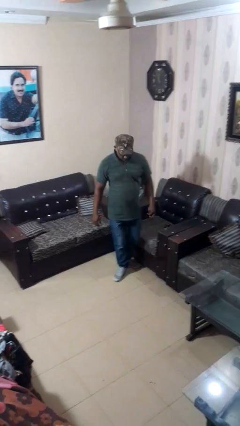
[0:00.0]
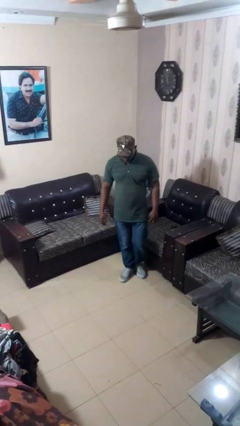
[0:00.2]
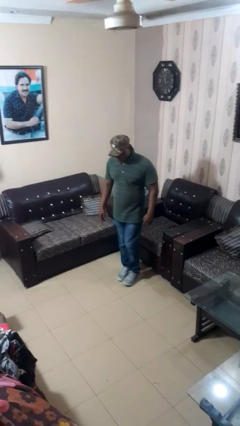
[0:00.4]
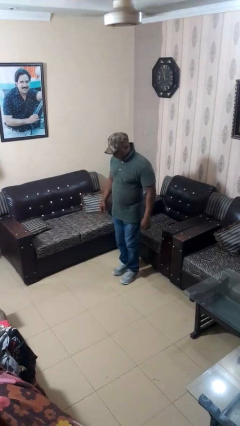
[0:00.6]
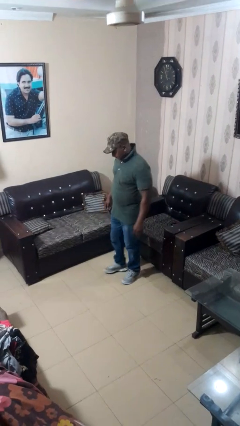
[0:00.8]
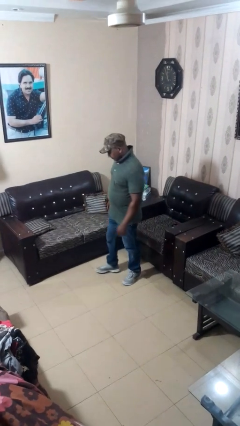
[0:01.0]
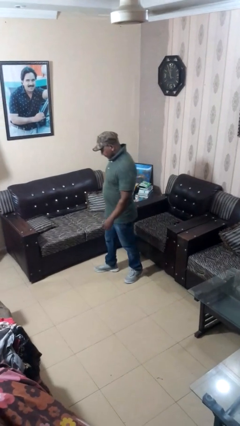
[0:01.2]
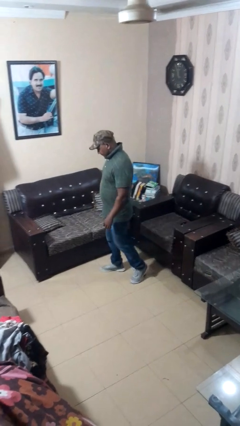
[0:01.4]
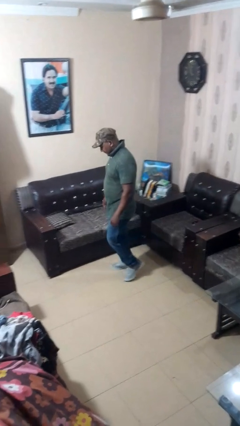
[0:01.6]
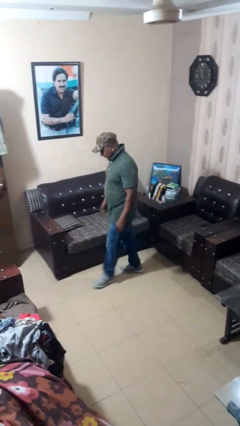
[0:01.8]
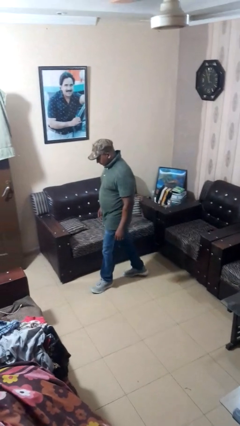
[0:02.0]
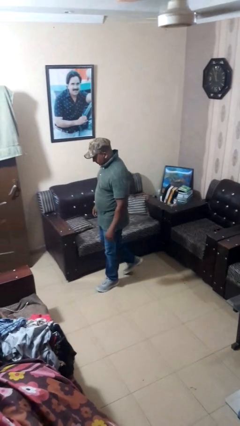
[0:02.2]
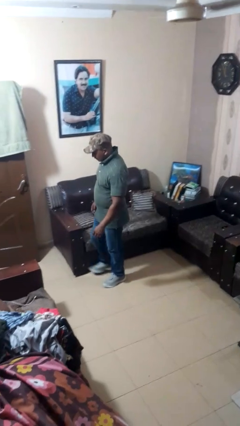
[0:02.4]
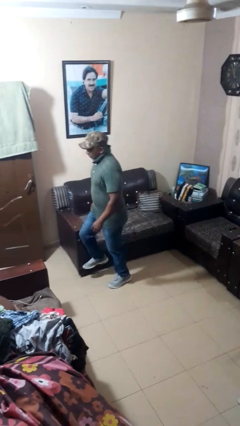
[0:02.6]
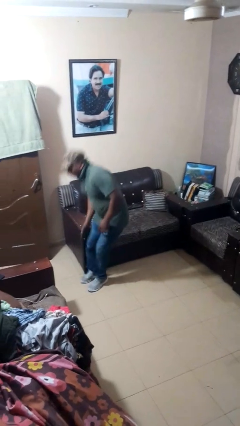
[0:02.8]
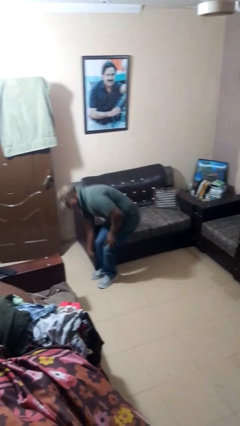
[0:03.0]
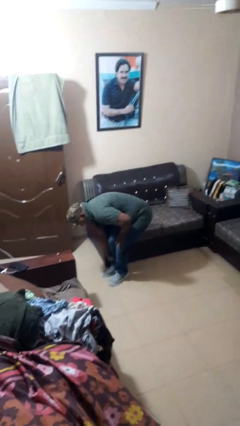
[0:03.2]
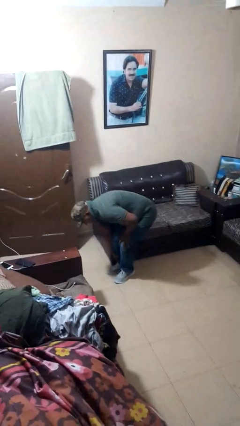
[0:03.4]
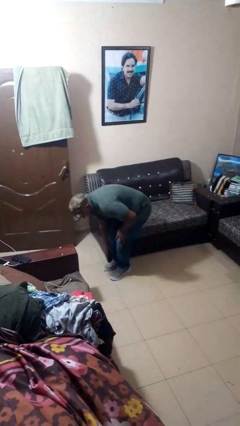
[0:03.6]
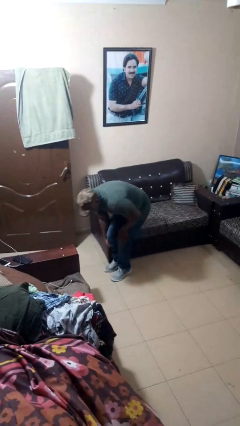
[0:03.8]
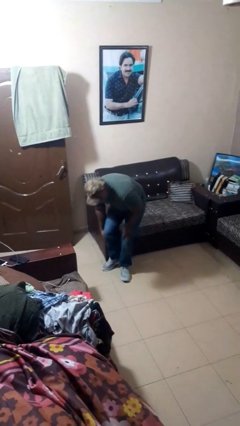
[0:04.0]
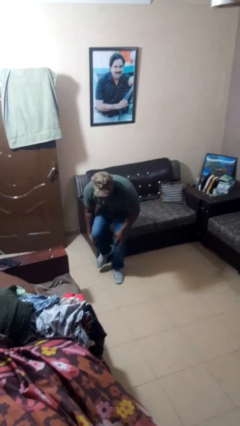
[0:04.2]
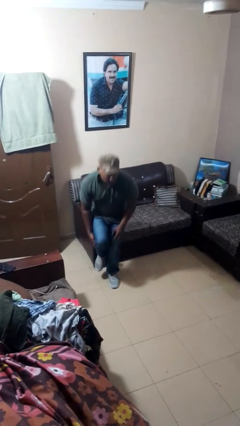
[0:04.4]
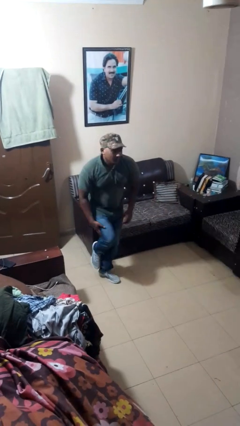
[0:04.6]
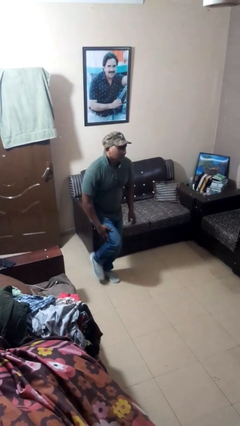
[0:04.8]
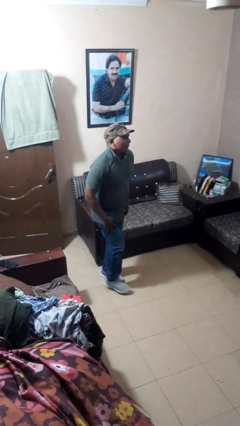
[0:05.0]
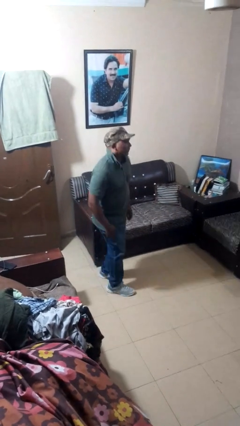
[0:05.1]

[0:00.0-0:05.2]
person stubs toe

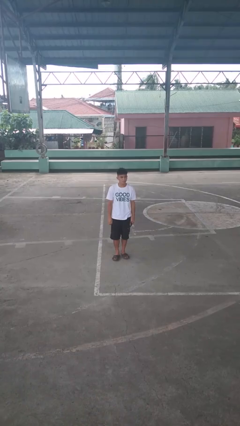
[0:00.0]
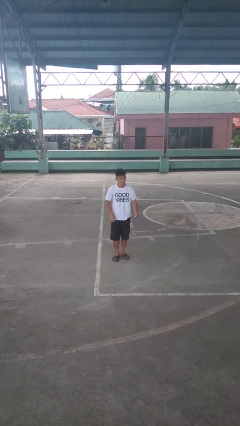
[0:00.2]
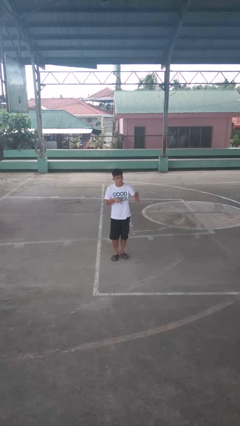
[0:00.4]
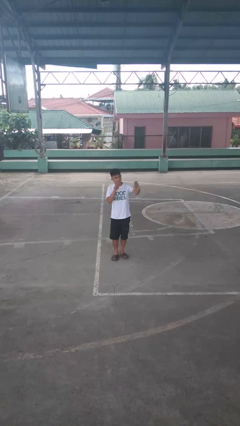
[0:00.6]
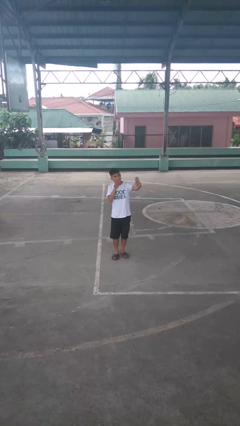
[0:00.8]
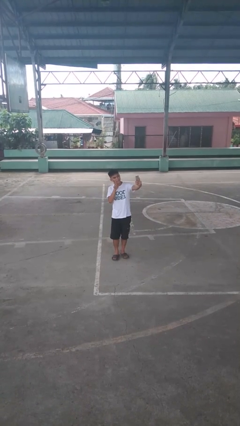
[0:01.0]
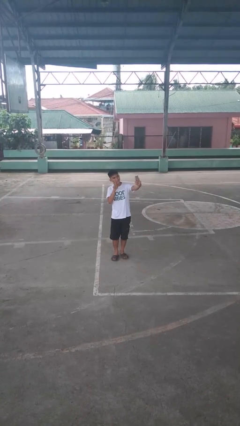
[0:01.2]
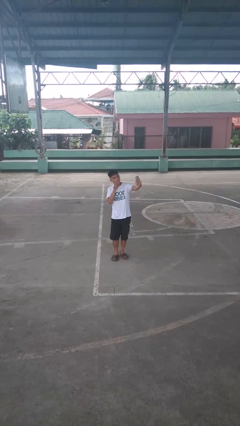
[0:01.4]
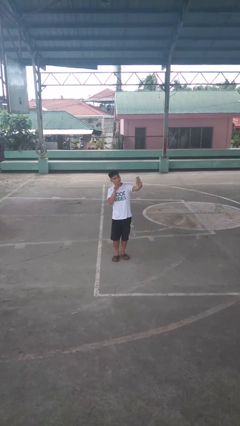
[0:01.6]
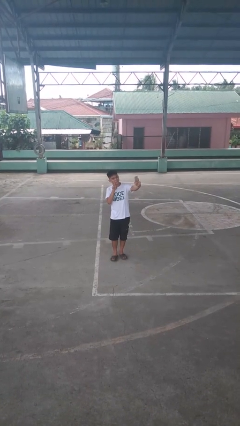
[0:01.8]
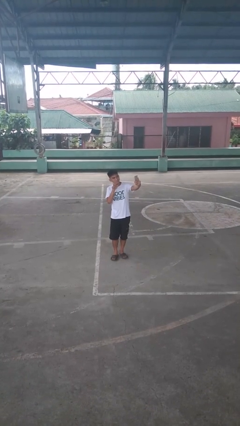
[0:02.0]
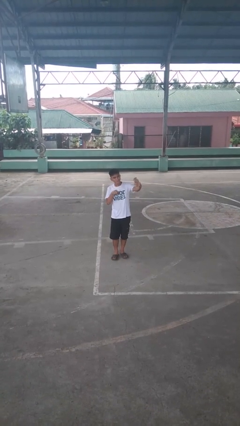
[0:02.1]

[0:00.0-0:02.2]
person takes selfie

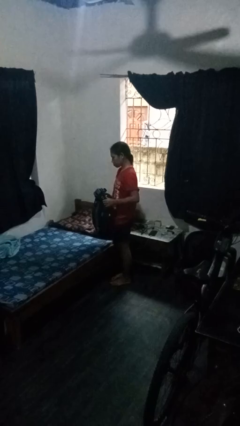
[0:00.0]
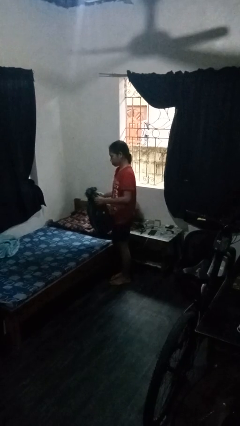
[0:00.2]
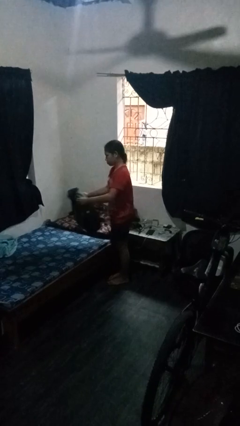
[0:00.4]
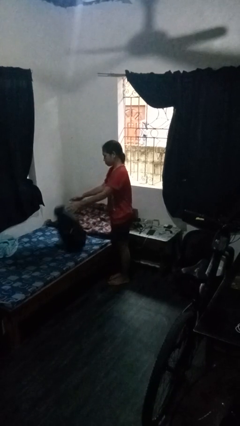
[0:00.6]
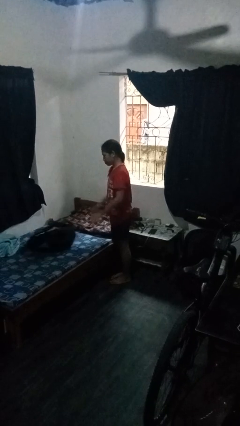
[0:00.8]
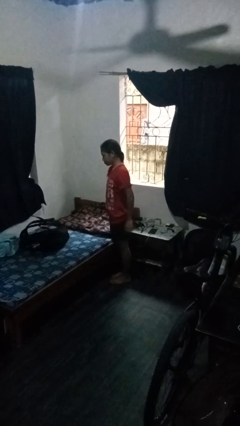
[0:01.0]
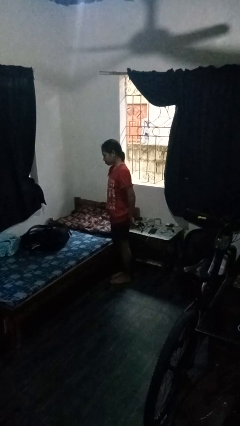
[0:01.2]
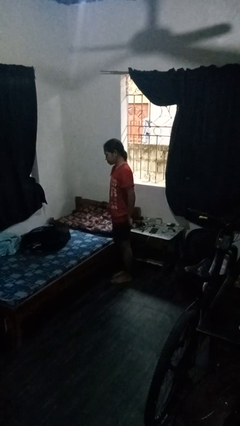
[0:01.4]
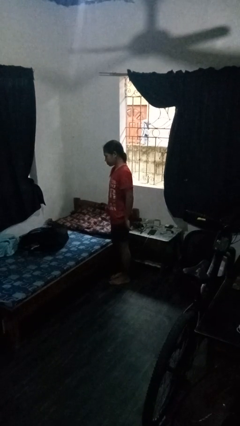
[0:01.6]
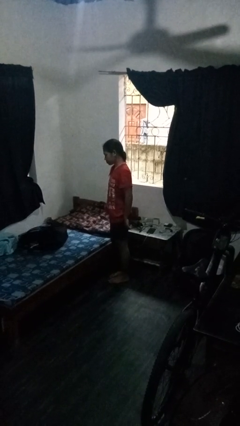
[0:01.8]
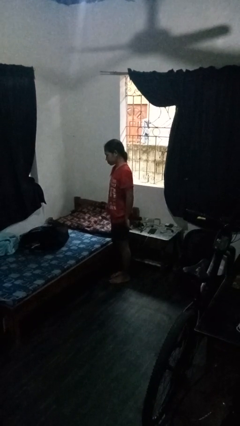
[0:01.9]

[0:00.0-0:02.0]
person throws object on bed

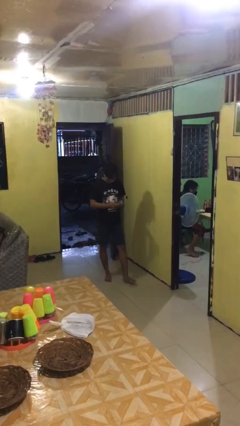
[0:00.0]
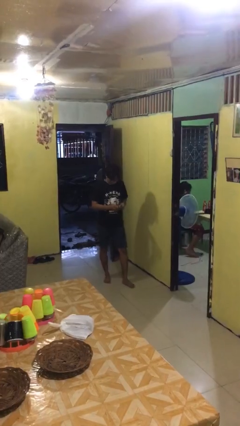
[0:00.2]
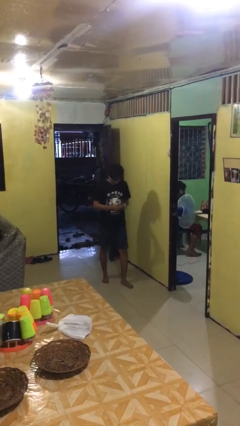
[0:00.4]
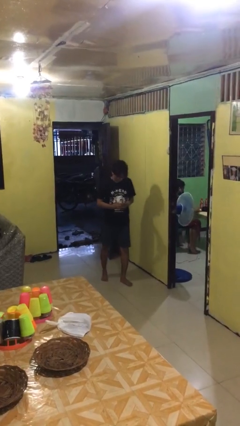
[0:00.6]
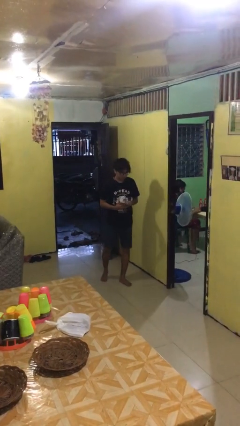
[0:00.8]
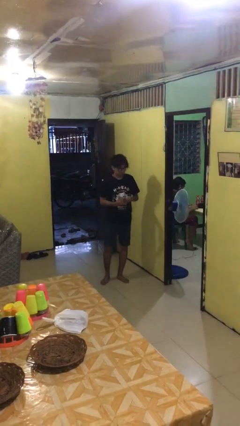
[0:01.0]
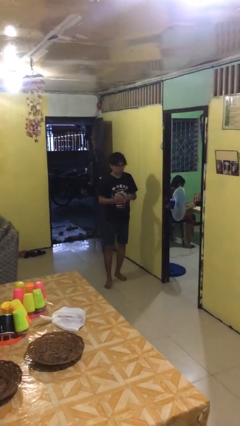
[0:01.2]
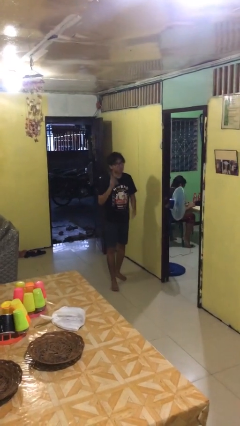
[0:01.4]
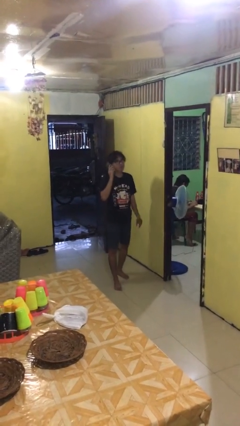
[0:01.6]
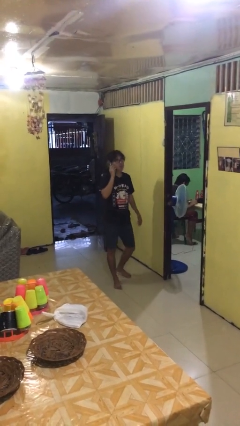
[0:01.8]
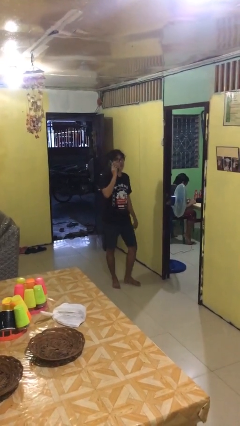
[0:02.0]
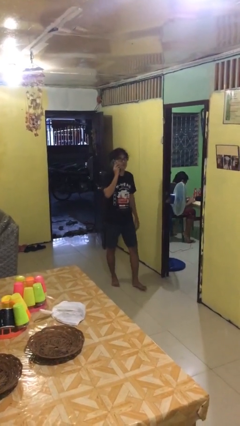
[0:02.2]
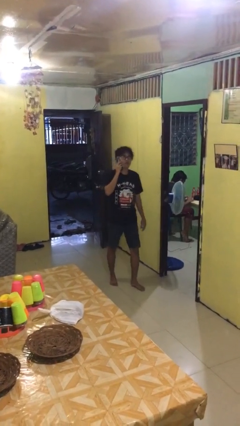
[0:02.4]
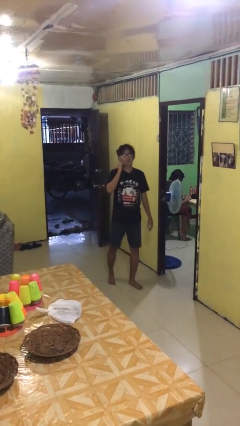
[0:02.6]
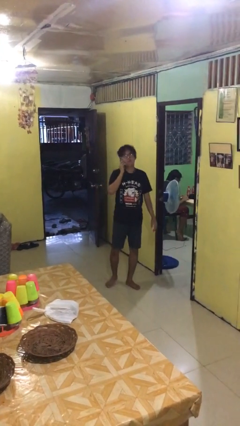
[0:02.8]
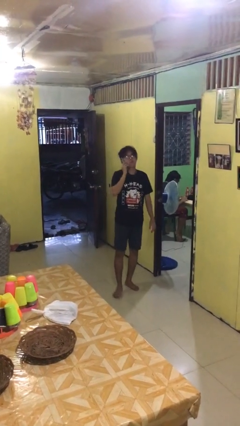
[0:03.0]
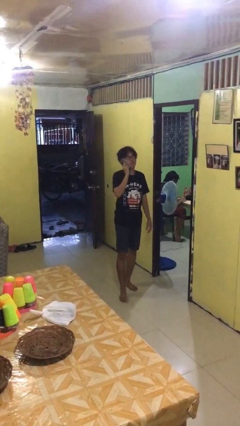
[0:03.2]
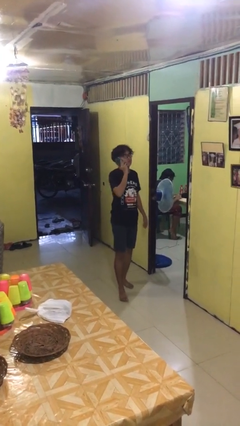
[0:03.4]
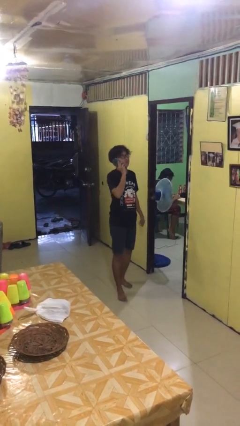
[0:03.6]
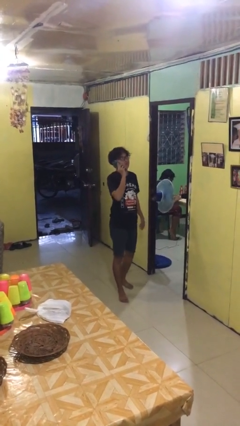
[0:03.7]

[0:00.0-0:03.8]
person talks on phone

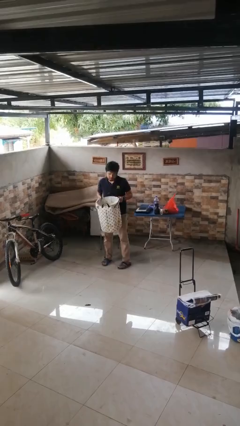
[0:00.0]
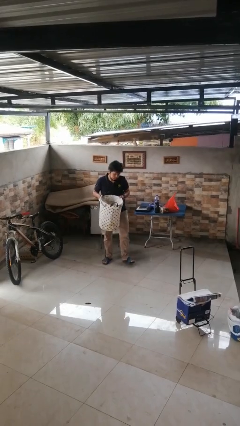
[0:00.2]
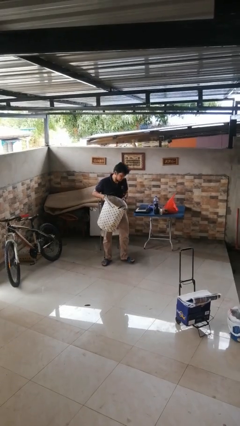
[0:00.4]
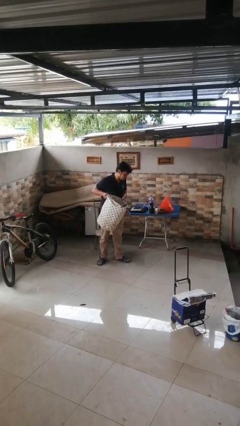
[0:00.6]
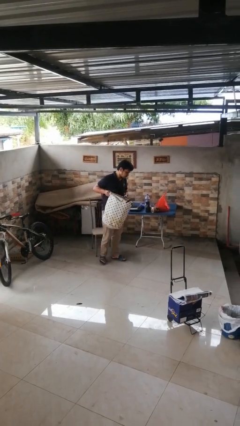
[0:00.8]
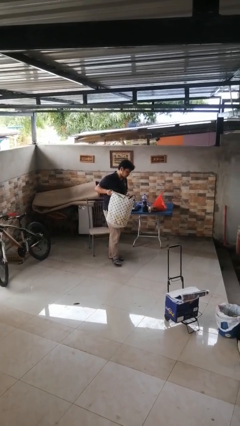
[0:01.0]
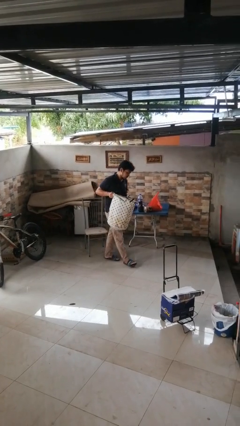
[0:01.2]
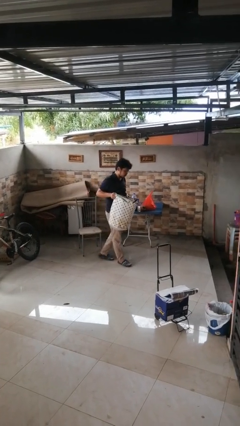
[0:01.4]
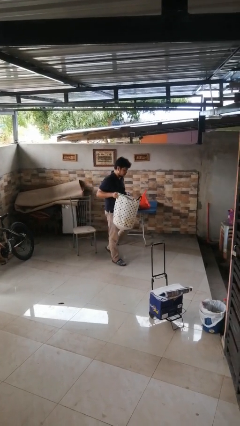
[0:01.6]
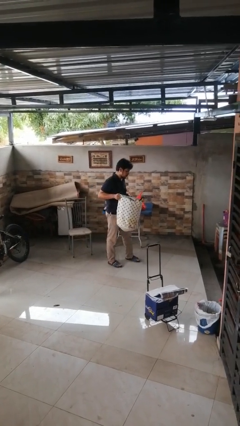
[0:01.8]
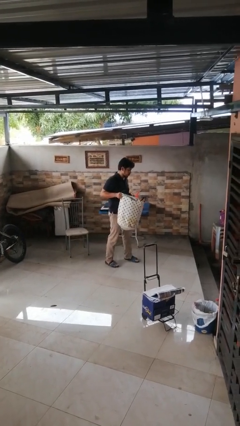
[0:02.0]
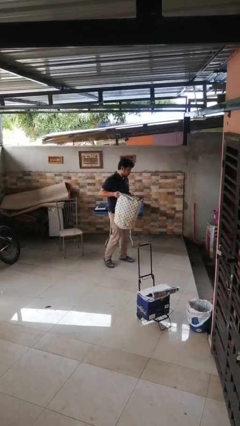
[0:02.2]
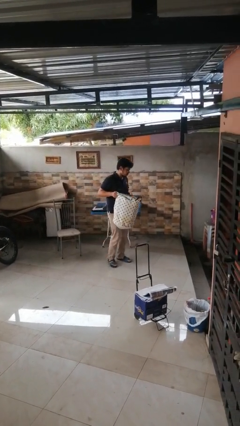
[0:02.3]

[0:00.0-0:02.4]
person carries laundry basket

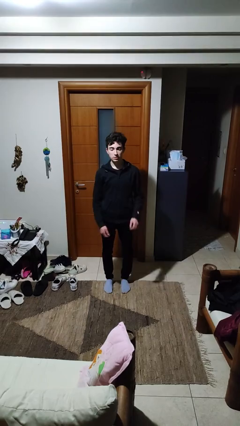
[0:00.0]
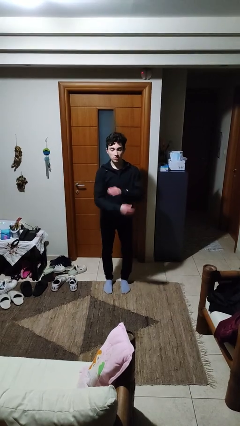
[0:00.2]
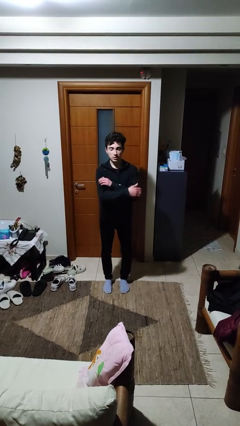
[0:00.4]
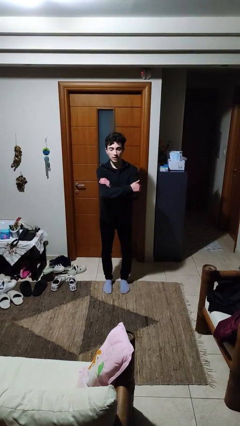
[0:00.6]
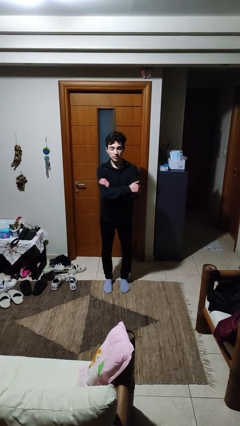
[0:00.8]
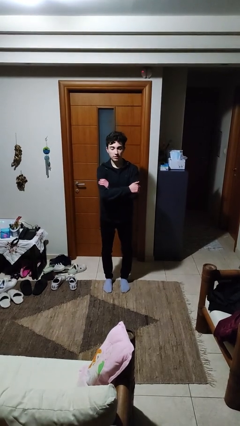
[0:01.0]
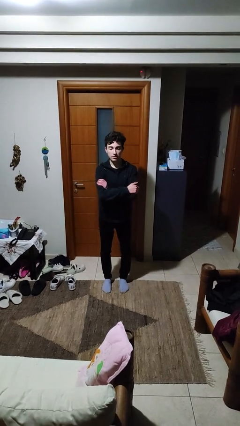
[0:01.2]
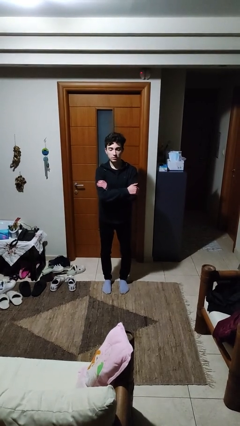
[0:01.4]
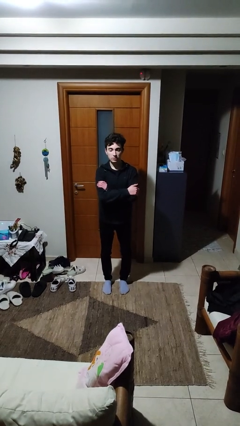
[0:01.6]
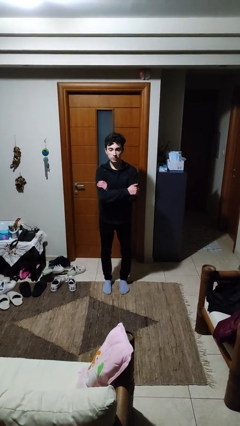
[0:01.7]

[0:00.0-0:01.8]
person crosses arms
